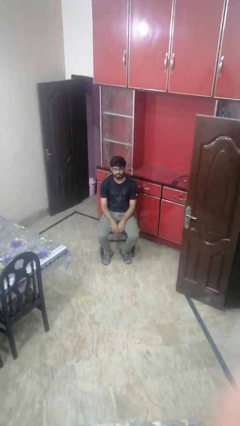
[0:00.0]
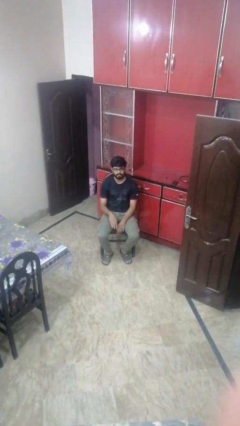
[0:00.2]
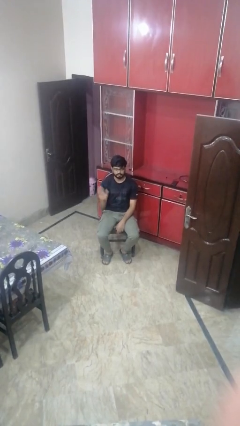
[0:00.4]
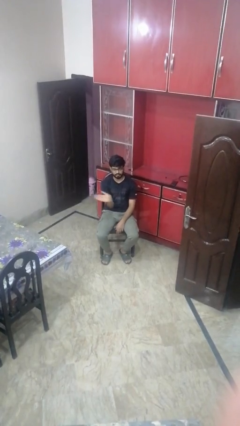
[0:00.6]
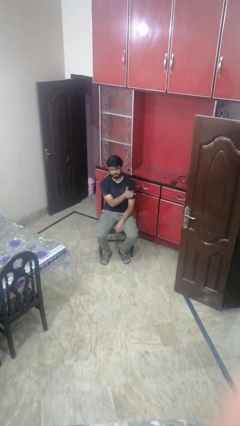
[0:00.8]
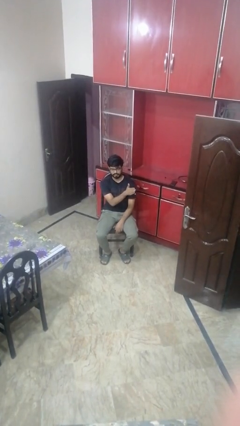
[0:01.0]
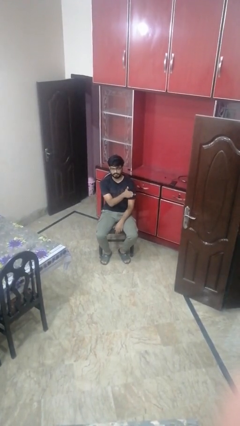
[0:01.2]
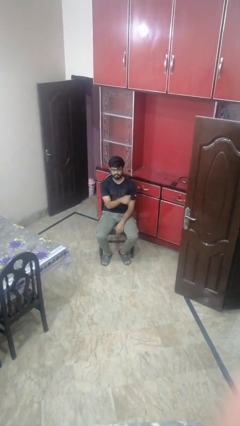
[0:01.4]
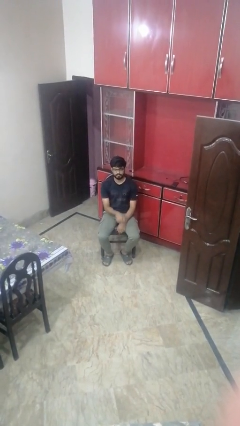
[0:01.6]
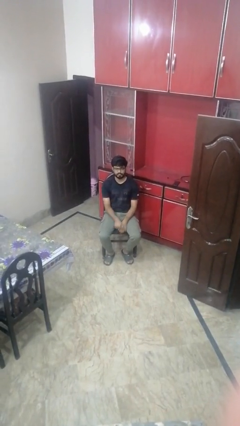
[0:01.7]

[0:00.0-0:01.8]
person gestures swipe left

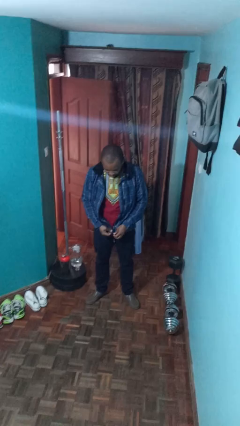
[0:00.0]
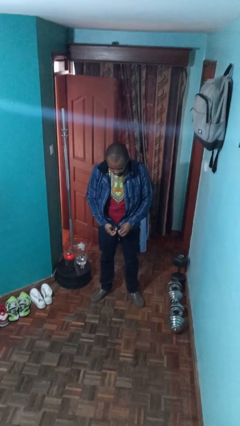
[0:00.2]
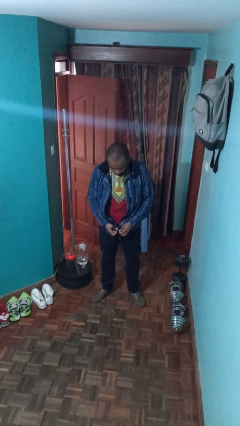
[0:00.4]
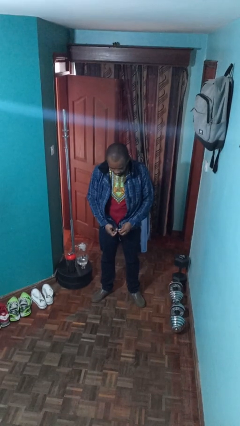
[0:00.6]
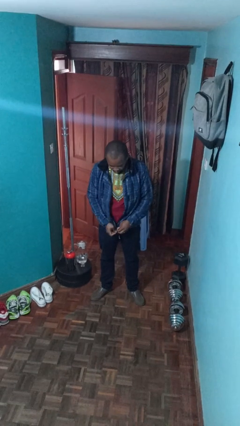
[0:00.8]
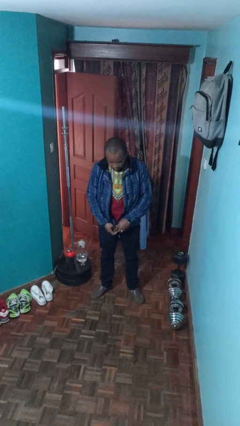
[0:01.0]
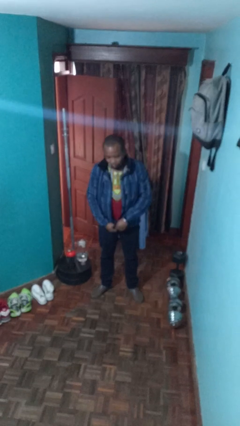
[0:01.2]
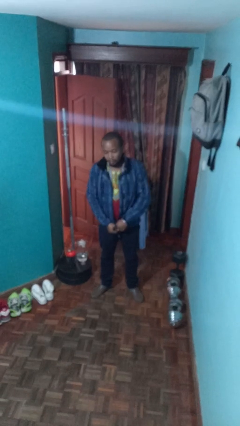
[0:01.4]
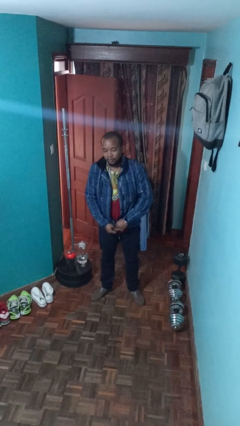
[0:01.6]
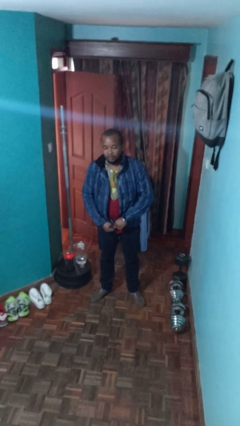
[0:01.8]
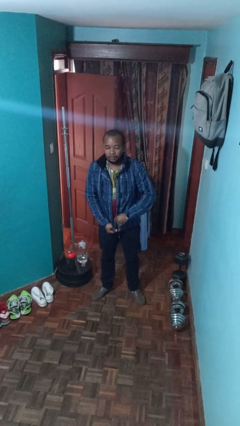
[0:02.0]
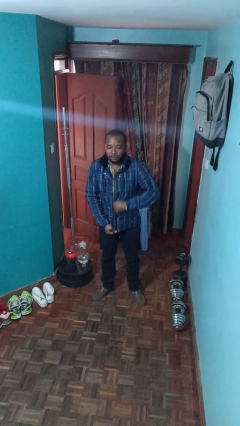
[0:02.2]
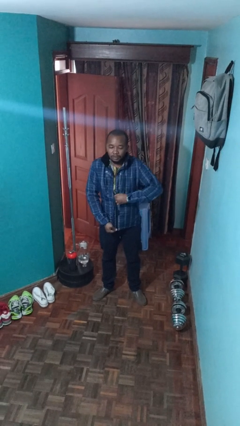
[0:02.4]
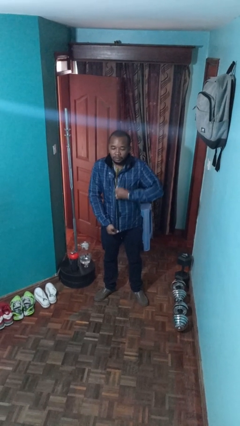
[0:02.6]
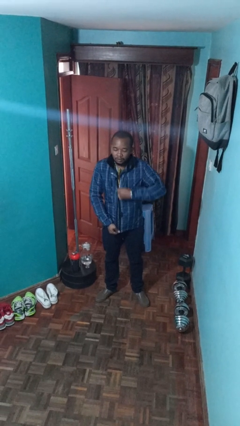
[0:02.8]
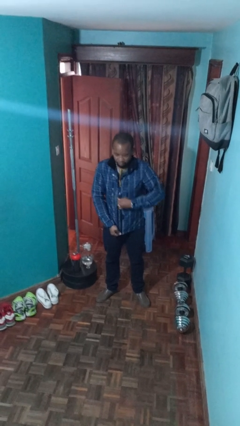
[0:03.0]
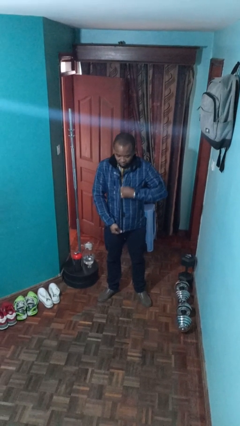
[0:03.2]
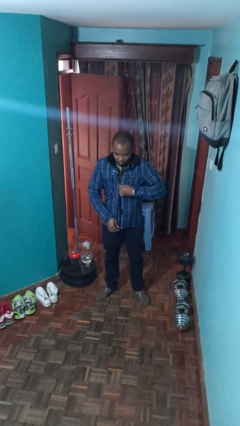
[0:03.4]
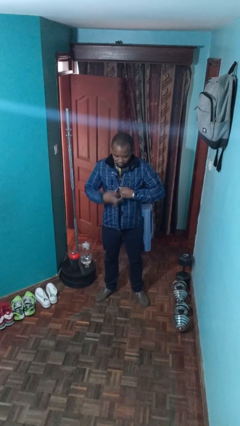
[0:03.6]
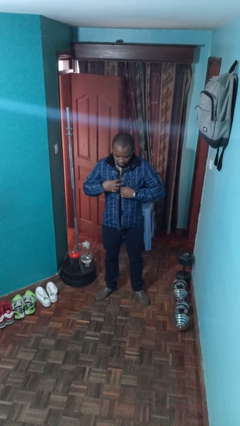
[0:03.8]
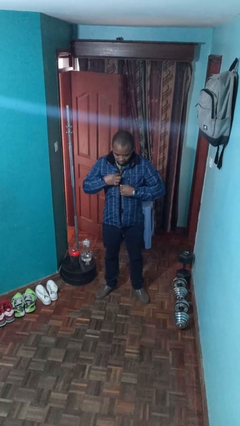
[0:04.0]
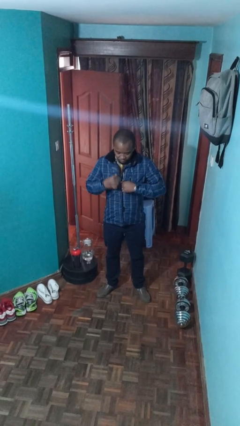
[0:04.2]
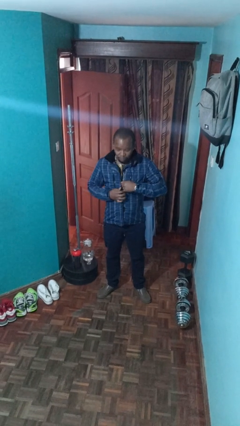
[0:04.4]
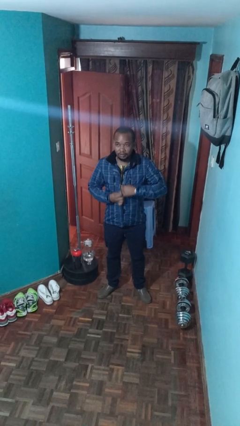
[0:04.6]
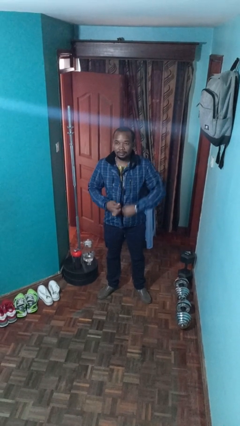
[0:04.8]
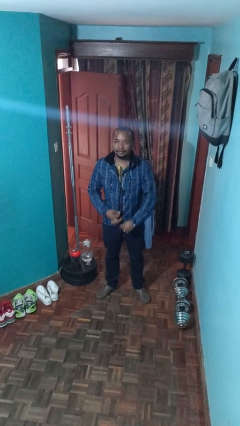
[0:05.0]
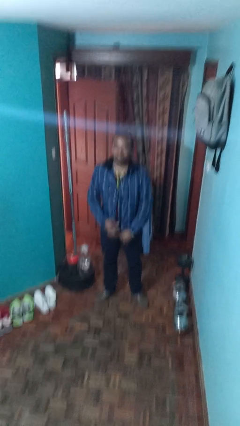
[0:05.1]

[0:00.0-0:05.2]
person zips up jacket

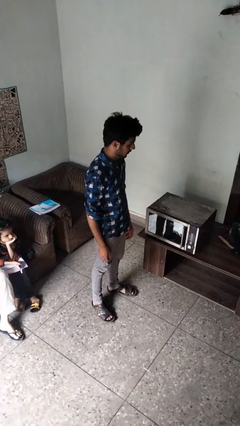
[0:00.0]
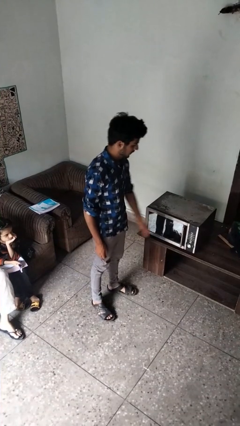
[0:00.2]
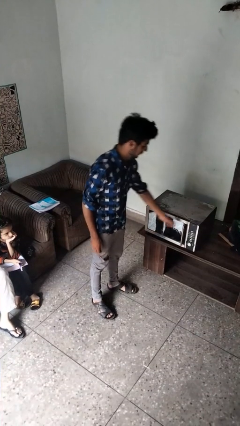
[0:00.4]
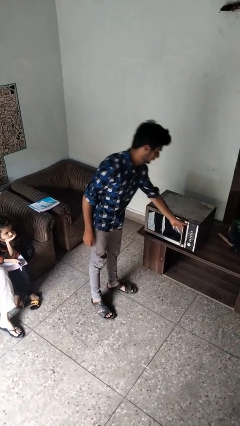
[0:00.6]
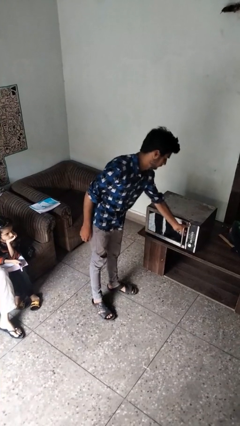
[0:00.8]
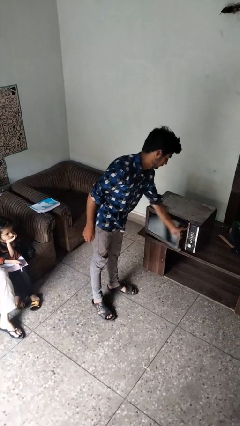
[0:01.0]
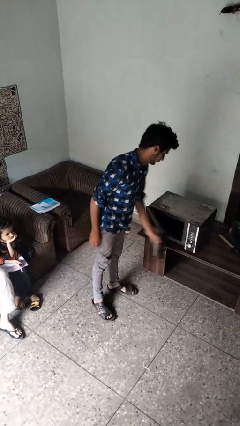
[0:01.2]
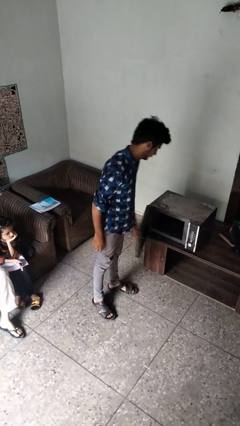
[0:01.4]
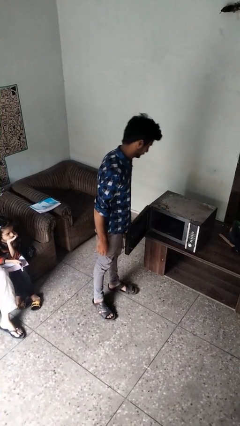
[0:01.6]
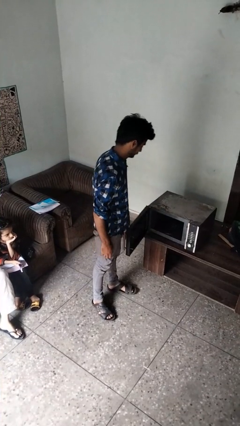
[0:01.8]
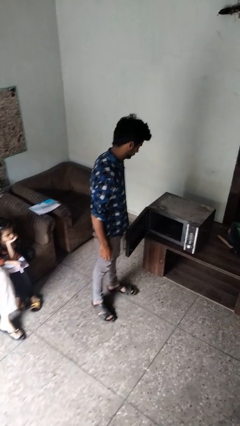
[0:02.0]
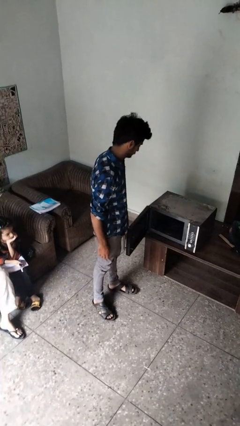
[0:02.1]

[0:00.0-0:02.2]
person opens microwave

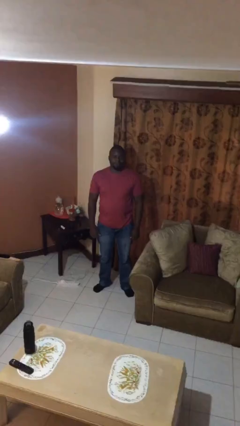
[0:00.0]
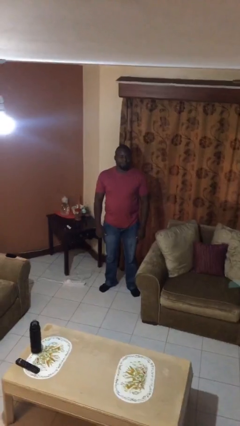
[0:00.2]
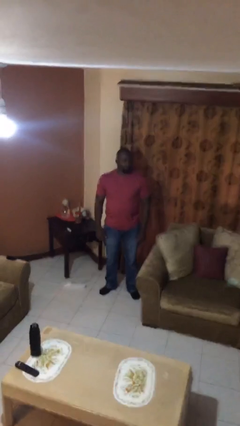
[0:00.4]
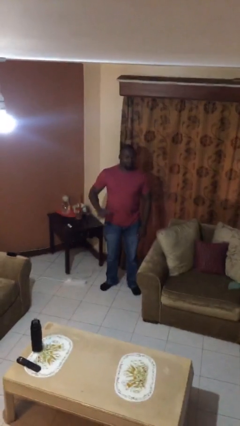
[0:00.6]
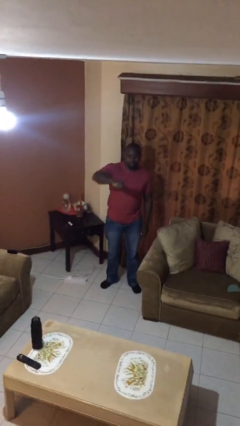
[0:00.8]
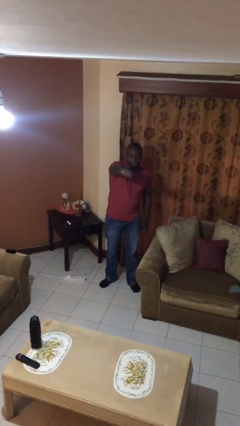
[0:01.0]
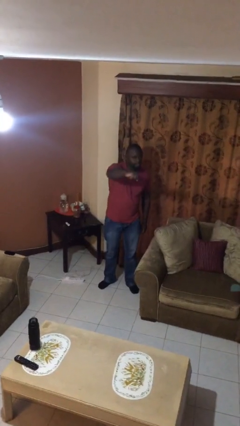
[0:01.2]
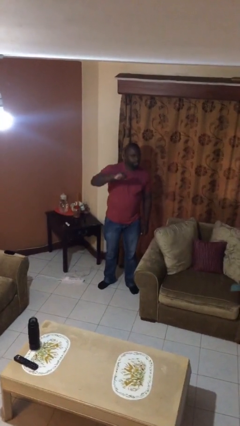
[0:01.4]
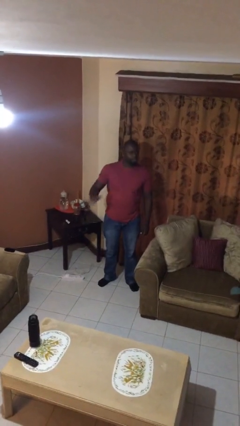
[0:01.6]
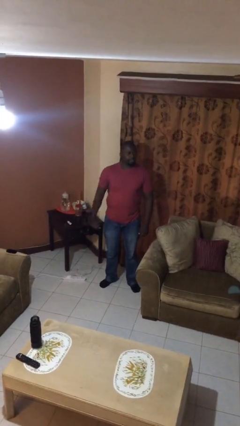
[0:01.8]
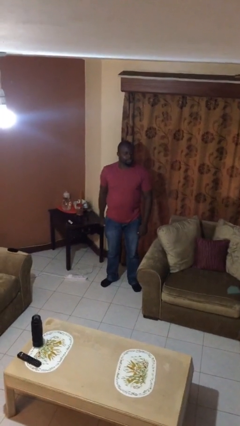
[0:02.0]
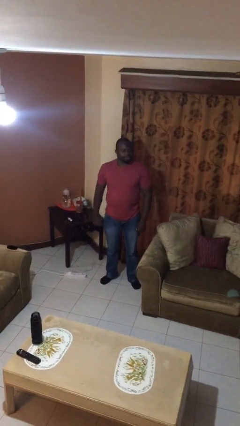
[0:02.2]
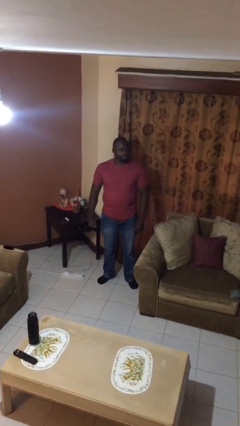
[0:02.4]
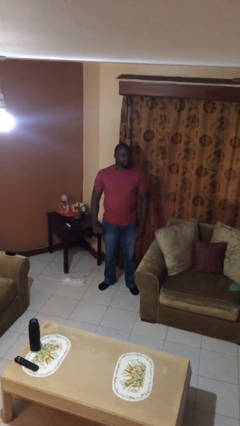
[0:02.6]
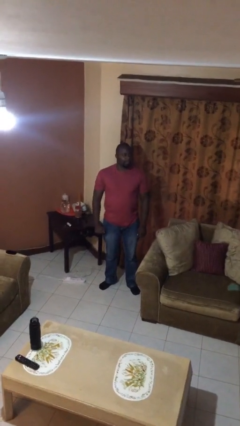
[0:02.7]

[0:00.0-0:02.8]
person punches

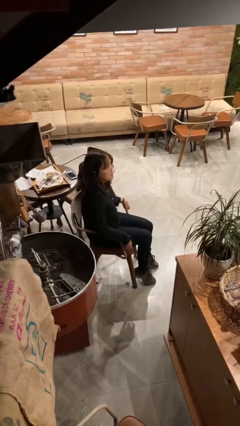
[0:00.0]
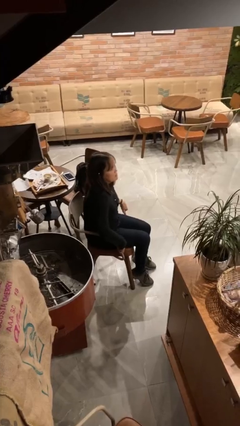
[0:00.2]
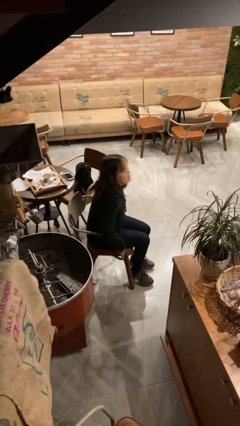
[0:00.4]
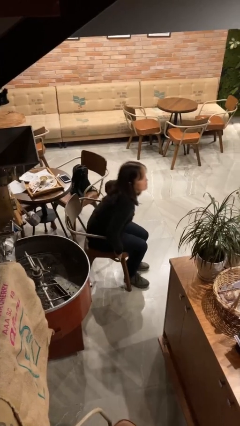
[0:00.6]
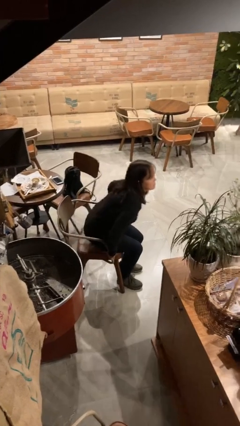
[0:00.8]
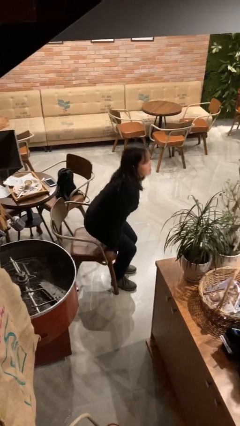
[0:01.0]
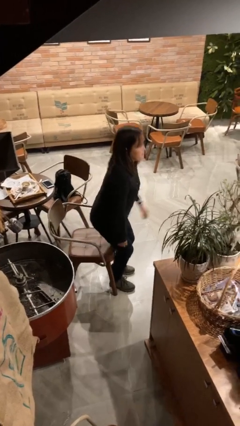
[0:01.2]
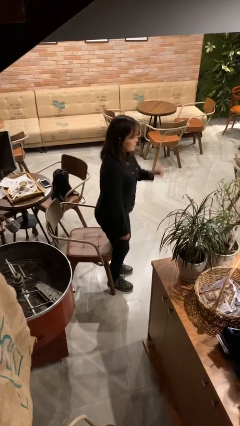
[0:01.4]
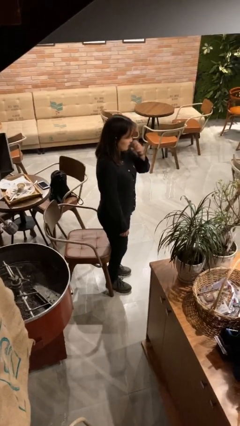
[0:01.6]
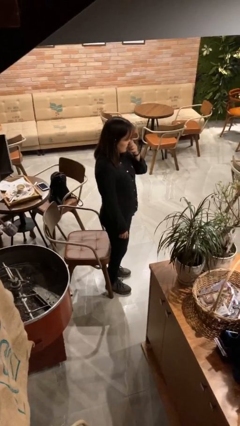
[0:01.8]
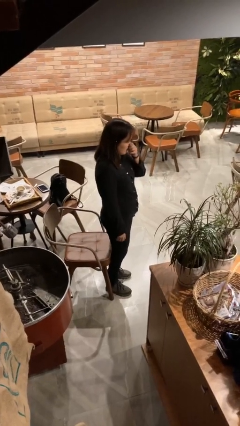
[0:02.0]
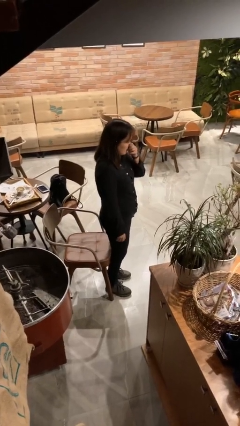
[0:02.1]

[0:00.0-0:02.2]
person stands up

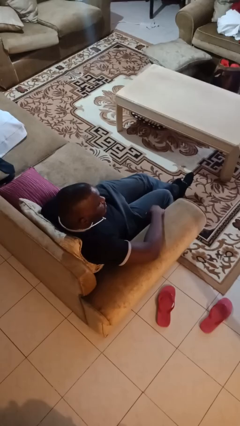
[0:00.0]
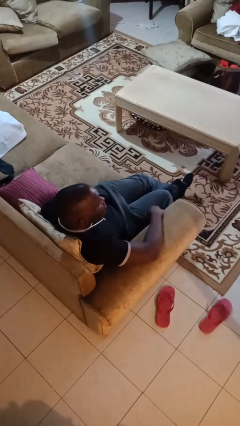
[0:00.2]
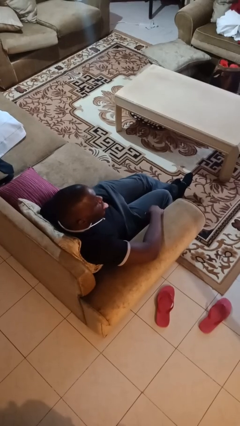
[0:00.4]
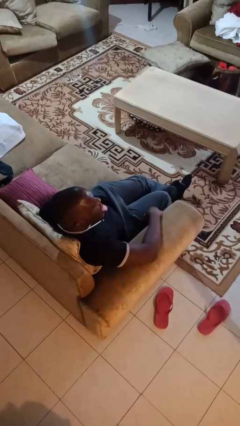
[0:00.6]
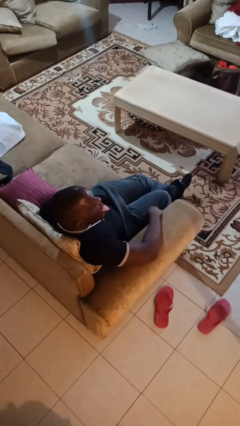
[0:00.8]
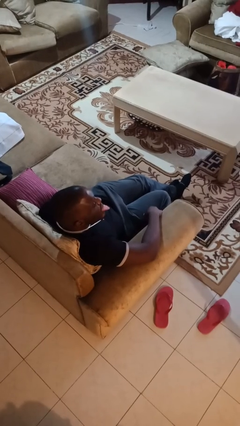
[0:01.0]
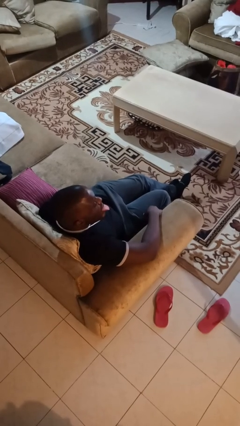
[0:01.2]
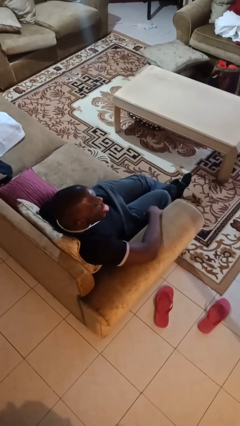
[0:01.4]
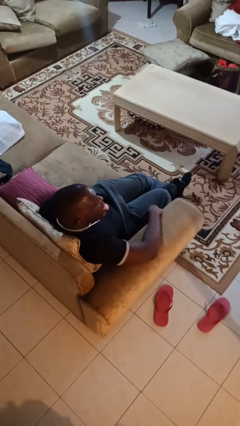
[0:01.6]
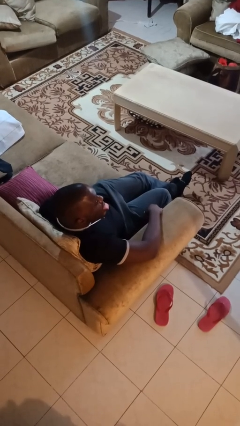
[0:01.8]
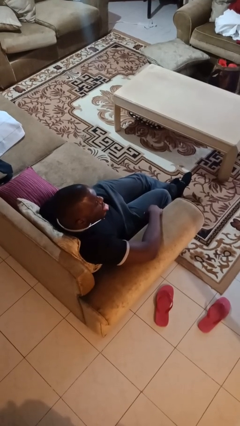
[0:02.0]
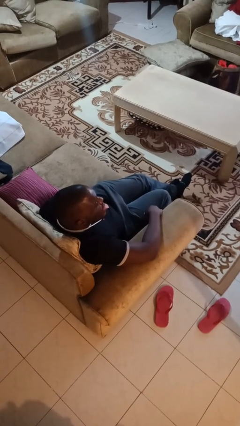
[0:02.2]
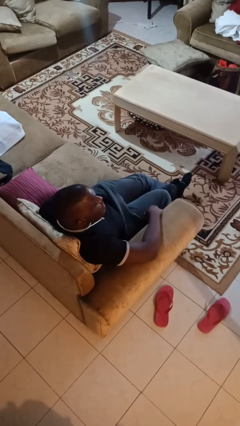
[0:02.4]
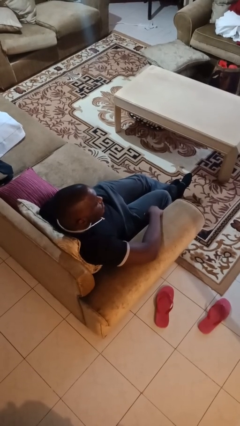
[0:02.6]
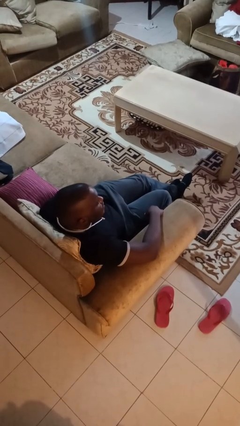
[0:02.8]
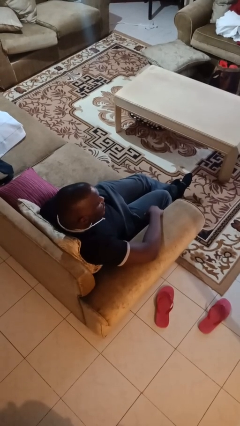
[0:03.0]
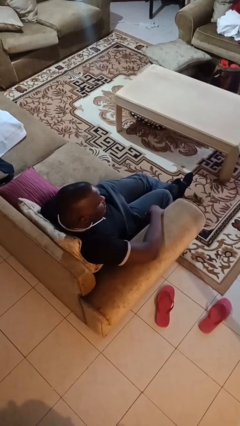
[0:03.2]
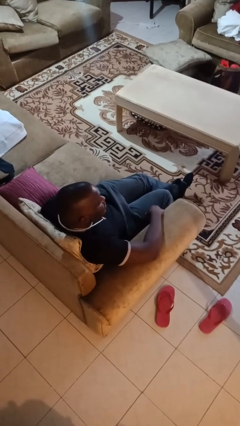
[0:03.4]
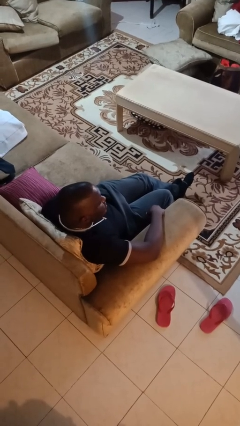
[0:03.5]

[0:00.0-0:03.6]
person sticks out tongue
